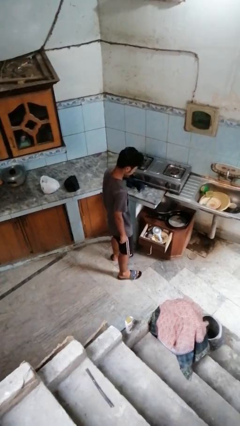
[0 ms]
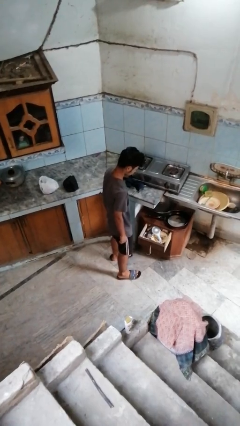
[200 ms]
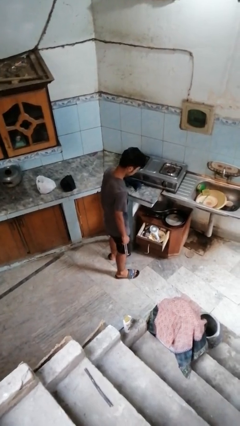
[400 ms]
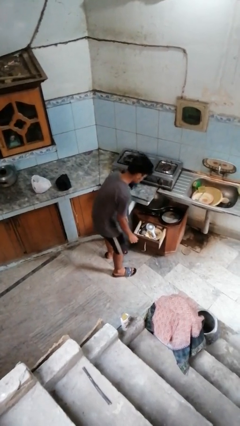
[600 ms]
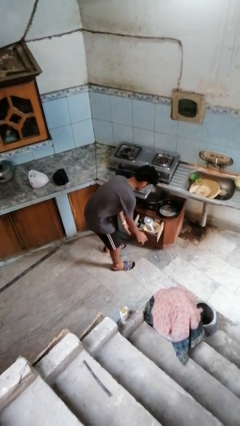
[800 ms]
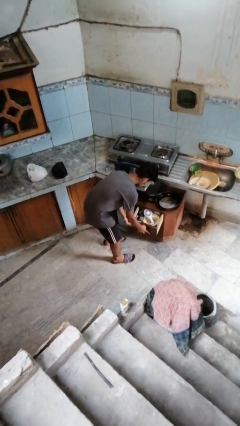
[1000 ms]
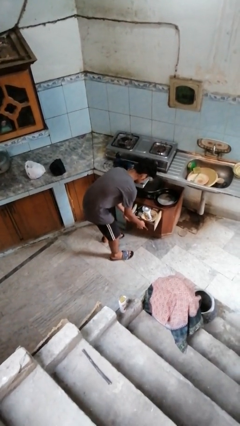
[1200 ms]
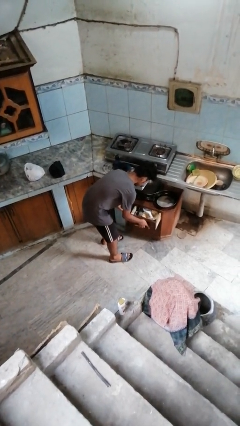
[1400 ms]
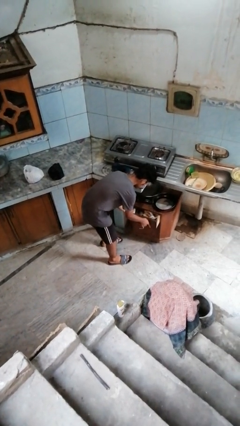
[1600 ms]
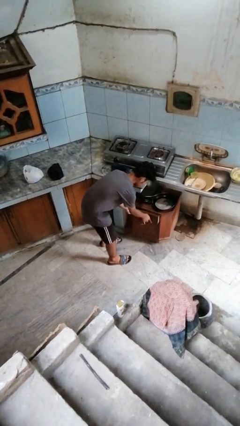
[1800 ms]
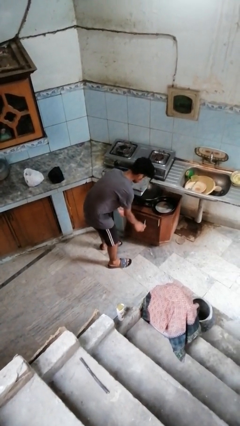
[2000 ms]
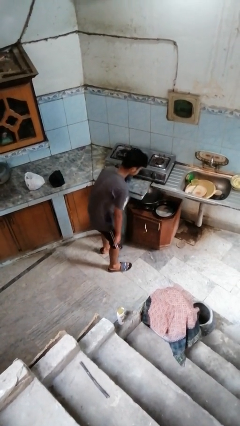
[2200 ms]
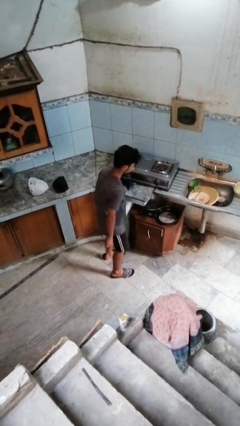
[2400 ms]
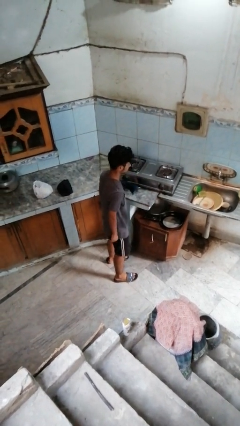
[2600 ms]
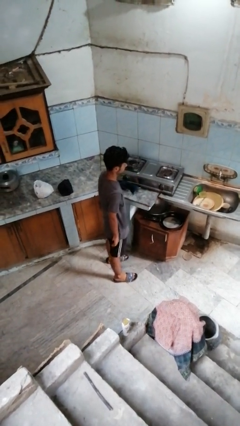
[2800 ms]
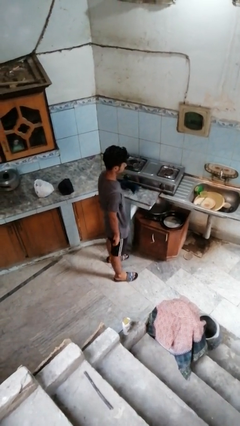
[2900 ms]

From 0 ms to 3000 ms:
person closes kitchen drawer

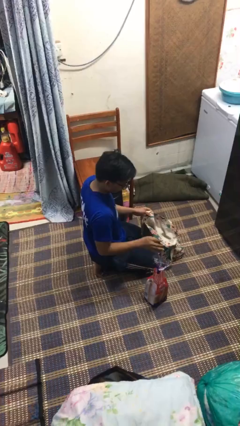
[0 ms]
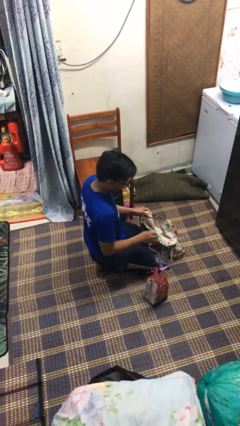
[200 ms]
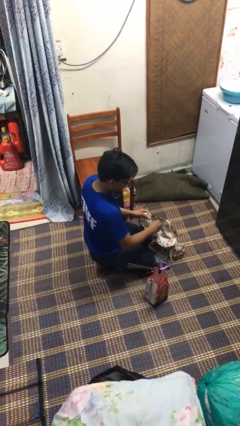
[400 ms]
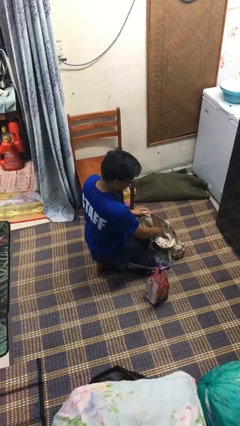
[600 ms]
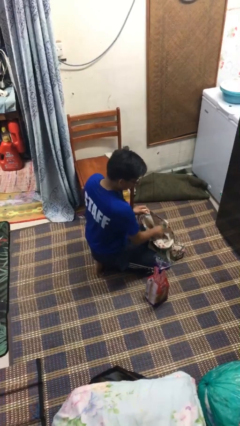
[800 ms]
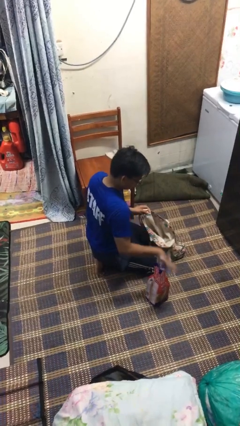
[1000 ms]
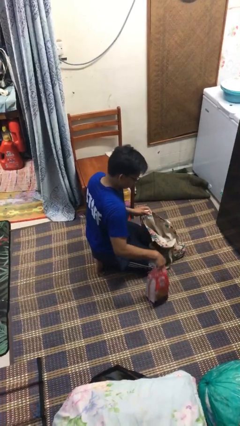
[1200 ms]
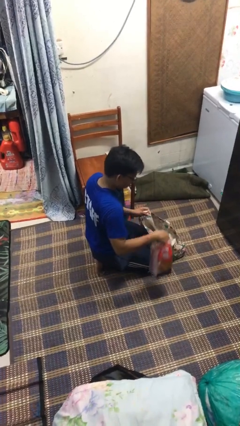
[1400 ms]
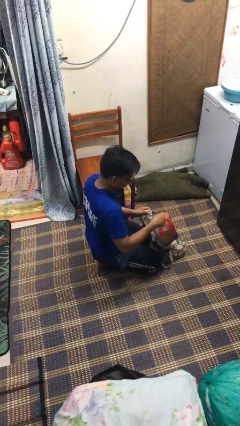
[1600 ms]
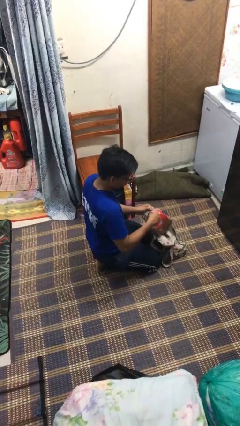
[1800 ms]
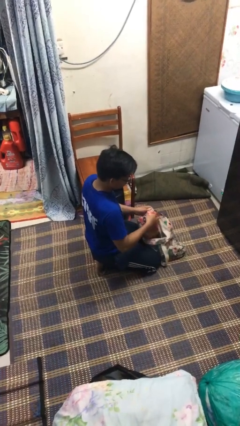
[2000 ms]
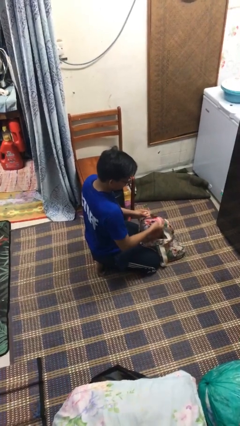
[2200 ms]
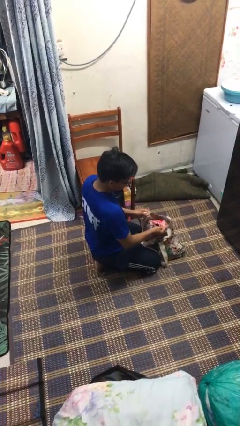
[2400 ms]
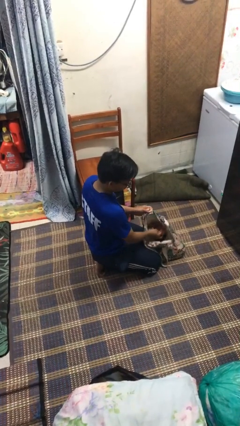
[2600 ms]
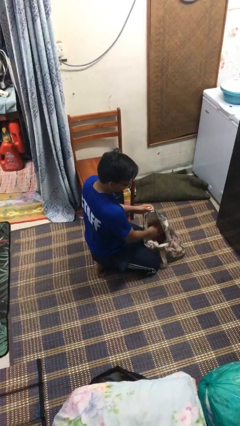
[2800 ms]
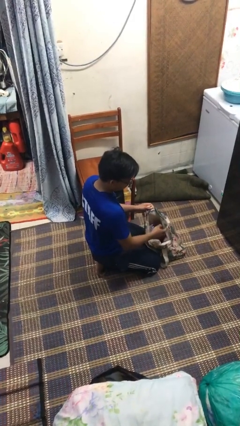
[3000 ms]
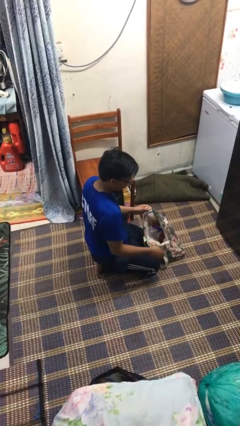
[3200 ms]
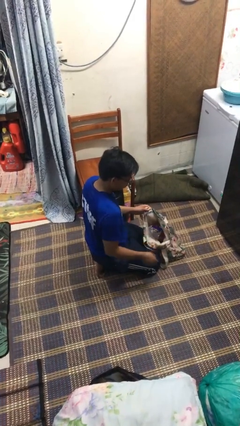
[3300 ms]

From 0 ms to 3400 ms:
person puts object into bag

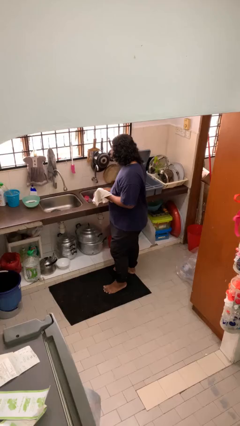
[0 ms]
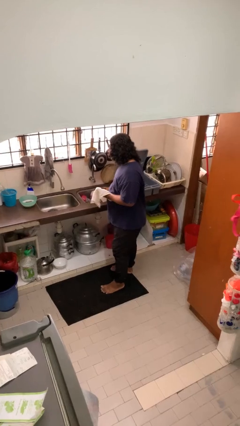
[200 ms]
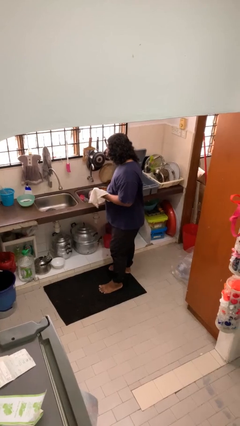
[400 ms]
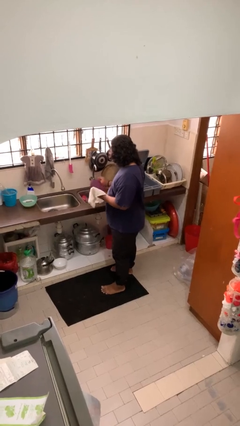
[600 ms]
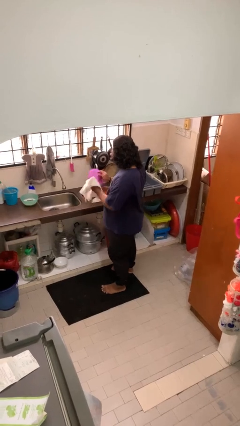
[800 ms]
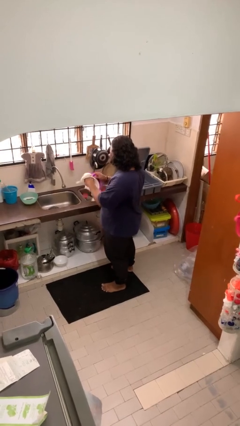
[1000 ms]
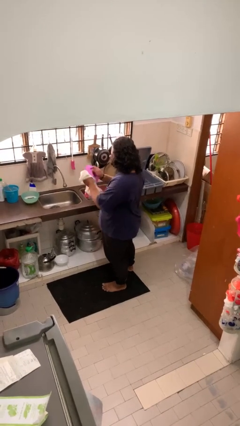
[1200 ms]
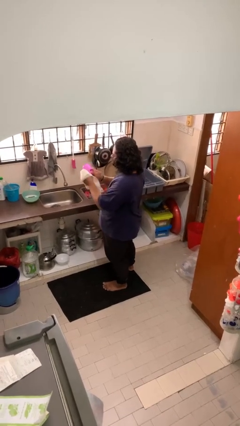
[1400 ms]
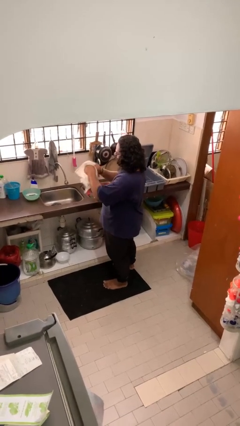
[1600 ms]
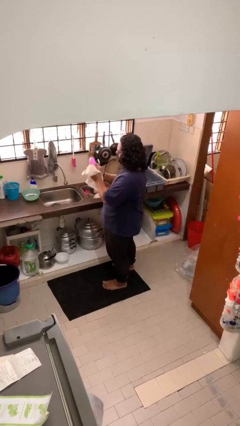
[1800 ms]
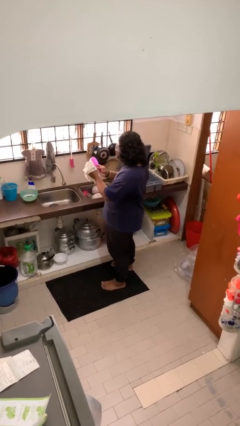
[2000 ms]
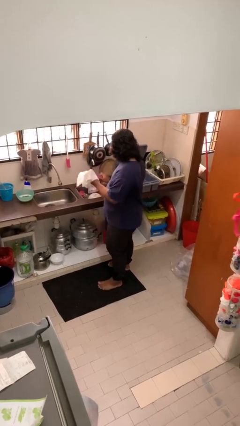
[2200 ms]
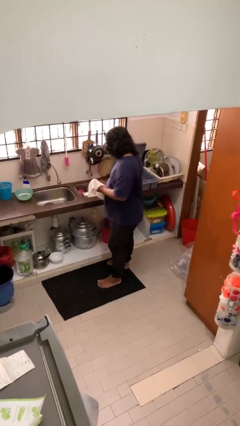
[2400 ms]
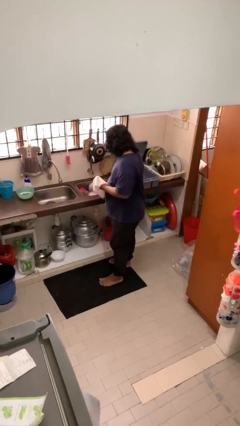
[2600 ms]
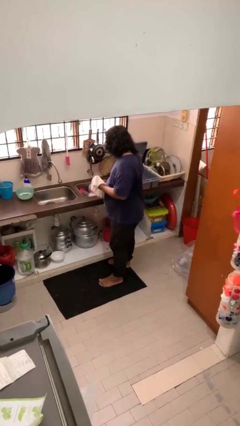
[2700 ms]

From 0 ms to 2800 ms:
person dries dish

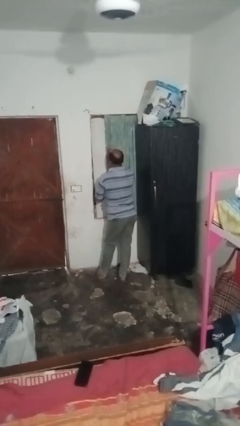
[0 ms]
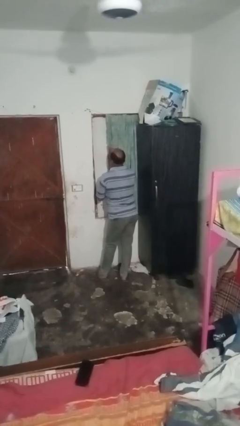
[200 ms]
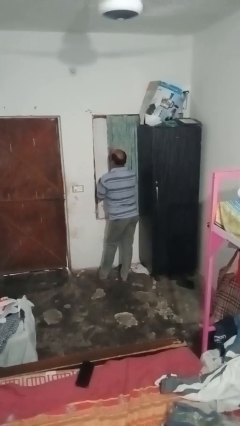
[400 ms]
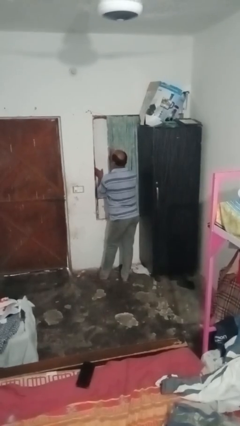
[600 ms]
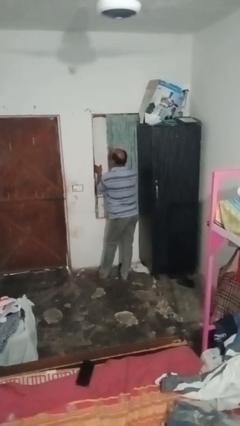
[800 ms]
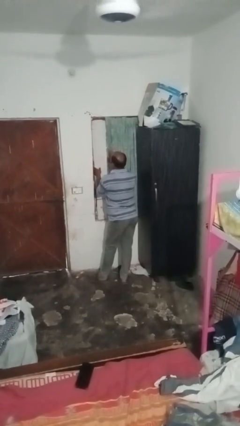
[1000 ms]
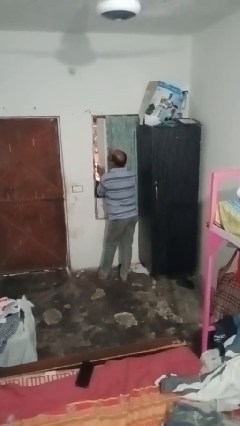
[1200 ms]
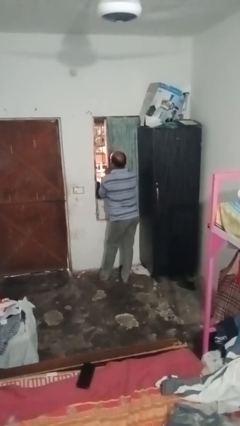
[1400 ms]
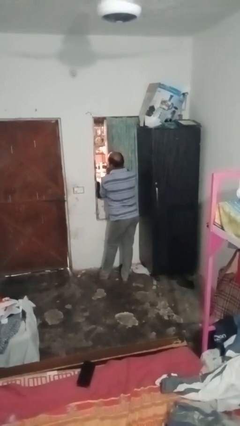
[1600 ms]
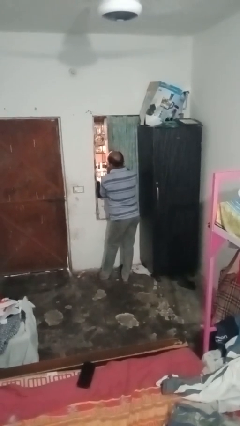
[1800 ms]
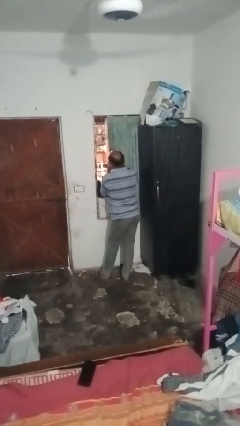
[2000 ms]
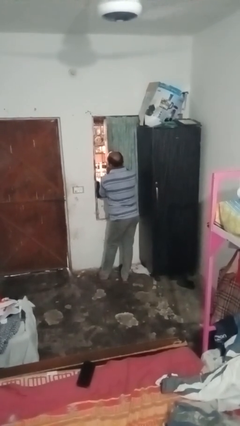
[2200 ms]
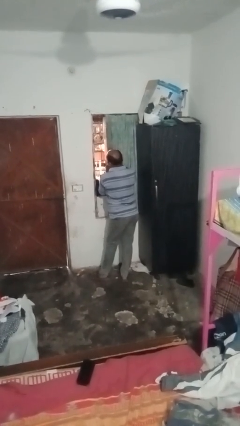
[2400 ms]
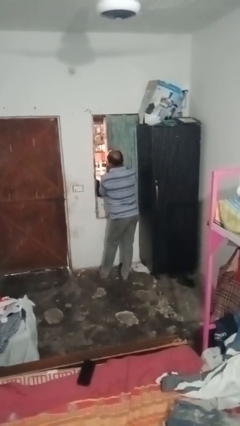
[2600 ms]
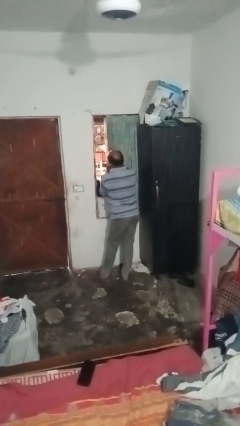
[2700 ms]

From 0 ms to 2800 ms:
person opens home window

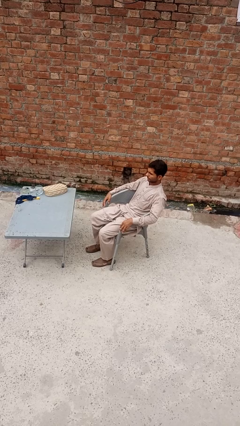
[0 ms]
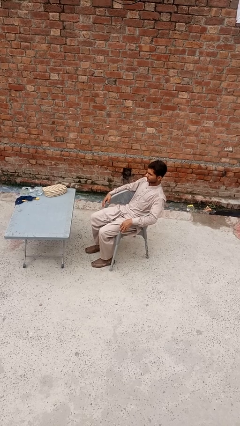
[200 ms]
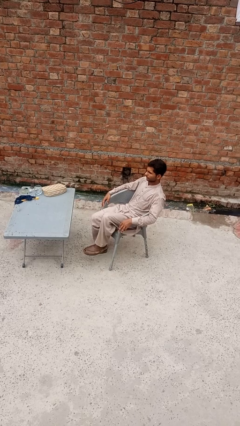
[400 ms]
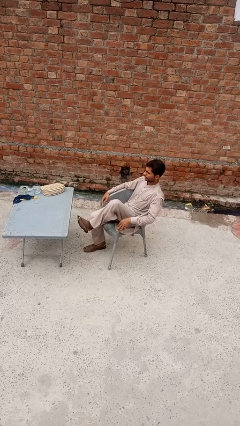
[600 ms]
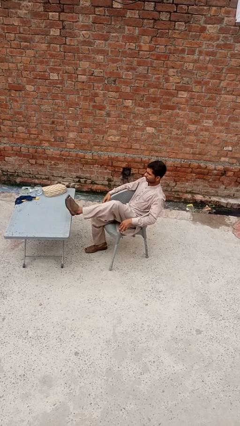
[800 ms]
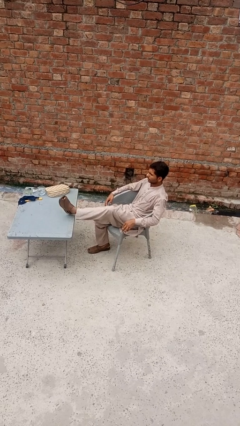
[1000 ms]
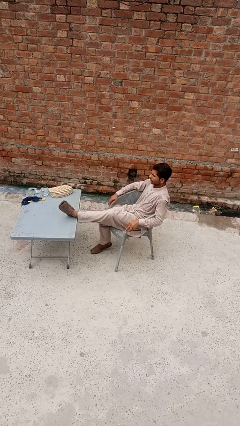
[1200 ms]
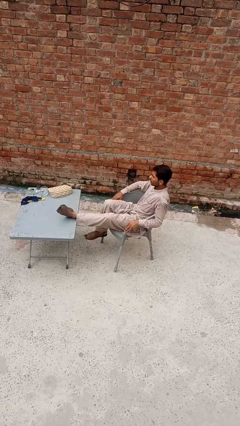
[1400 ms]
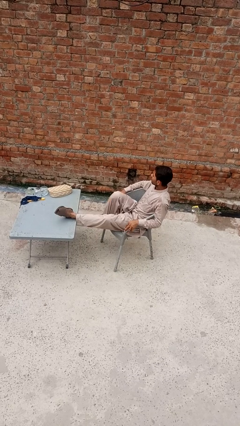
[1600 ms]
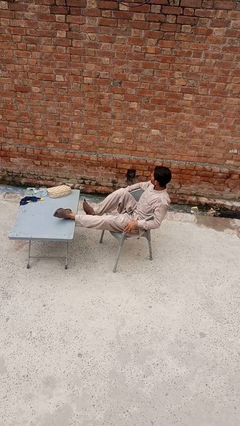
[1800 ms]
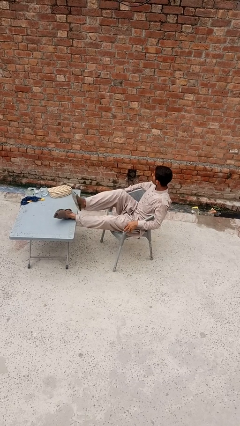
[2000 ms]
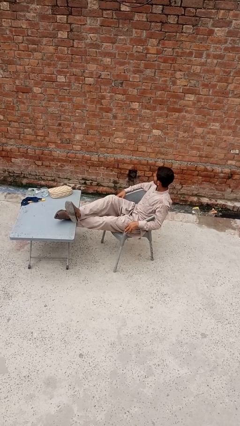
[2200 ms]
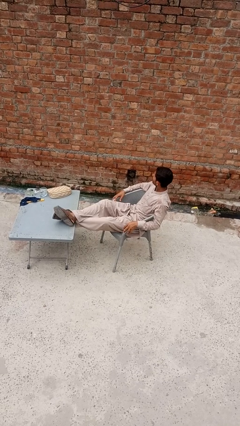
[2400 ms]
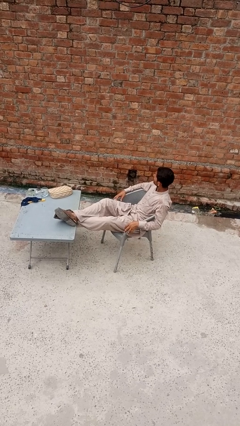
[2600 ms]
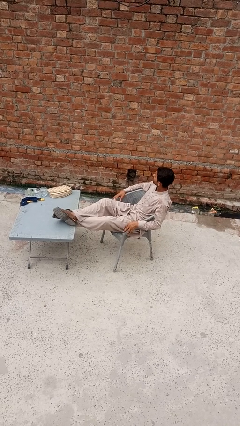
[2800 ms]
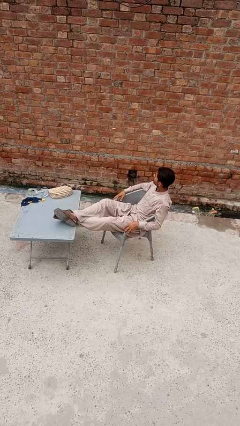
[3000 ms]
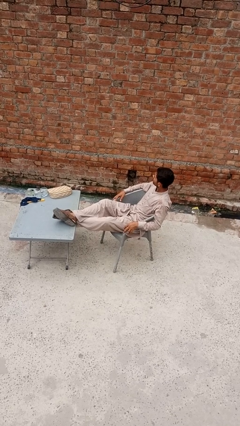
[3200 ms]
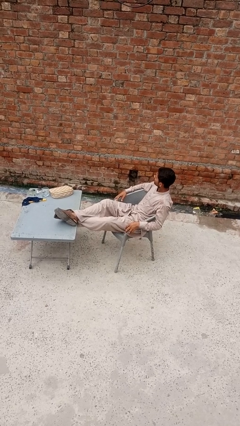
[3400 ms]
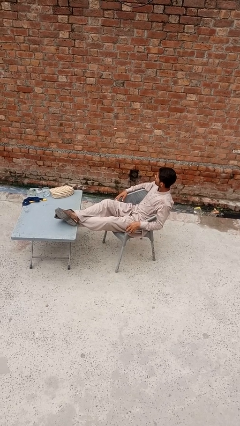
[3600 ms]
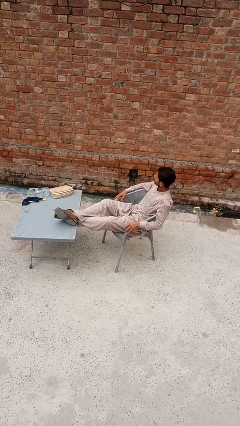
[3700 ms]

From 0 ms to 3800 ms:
person puts feet up

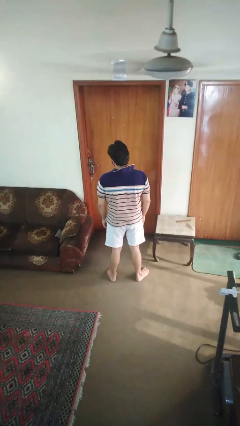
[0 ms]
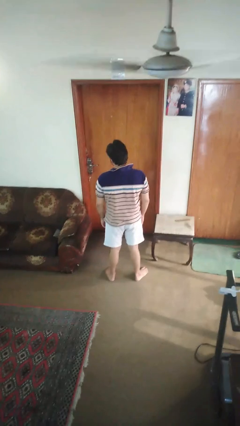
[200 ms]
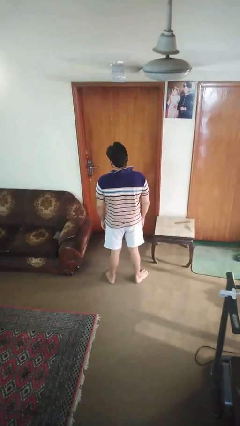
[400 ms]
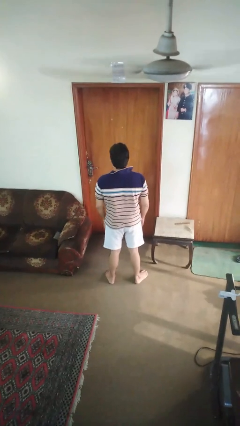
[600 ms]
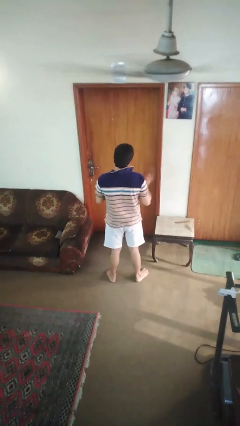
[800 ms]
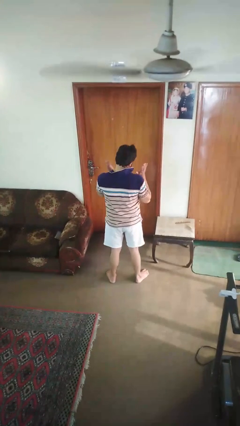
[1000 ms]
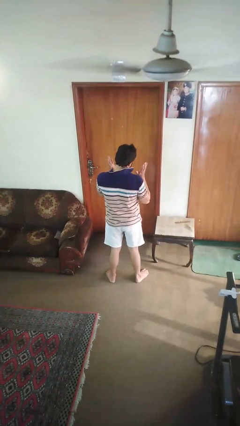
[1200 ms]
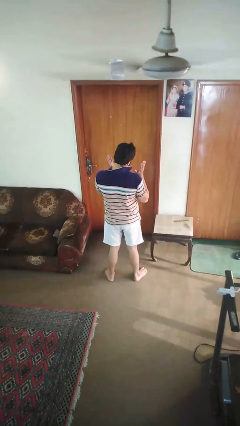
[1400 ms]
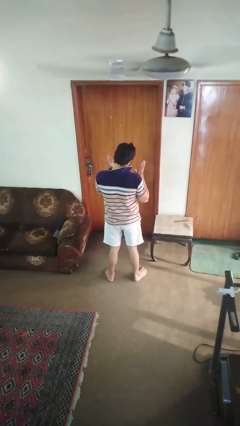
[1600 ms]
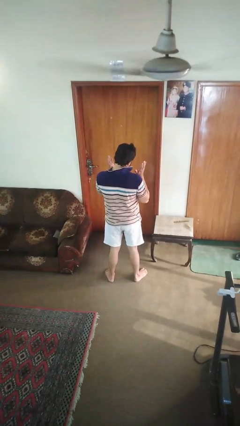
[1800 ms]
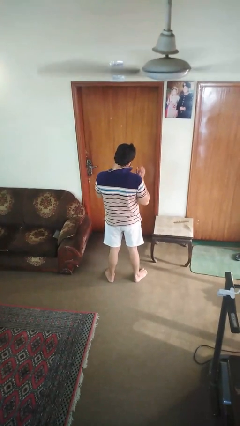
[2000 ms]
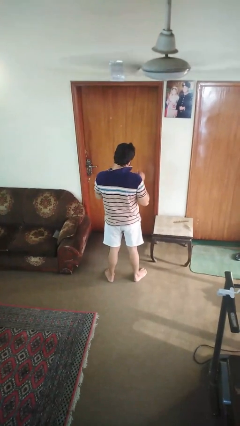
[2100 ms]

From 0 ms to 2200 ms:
person shrugs
